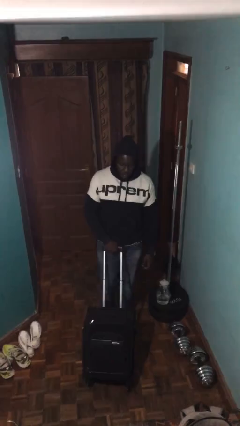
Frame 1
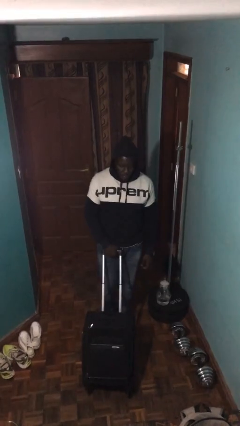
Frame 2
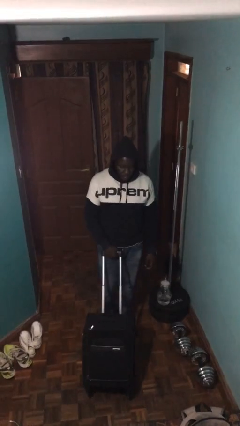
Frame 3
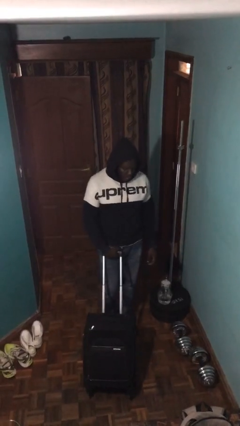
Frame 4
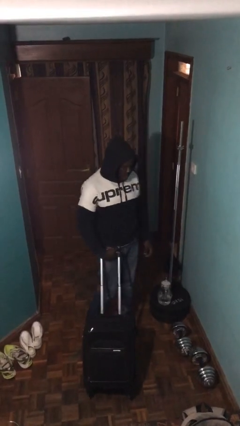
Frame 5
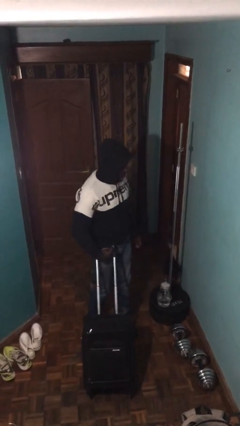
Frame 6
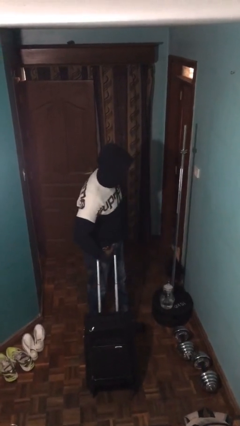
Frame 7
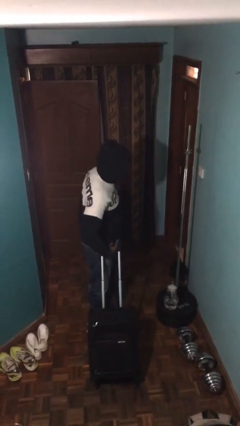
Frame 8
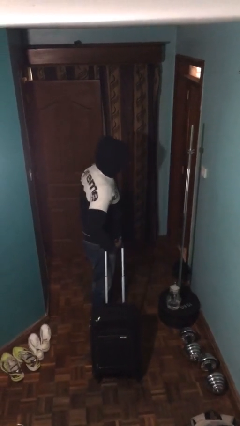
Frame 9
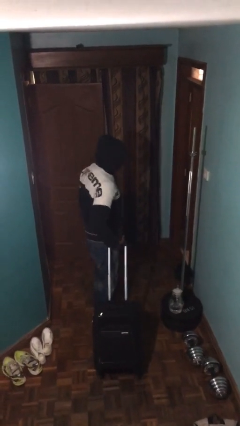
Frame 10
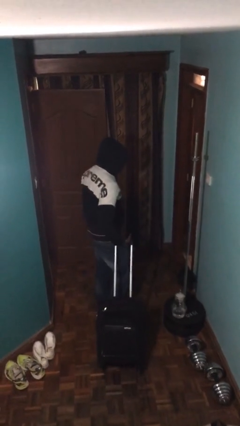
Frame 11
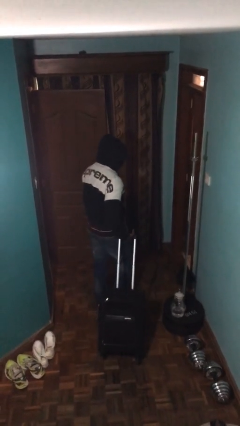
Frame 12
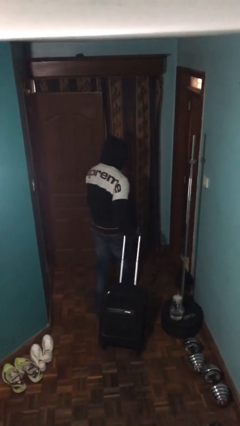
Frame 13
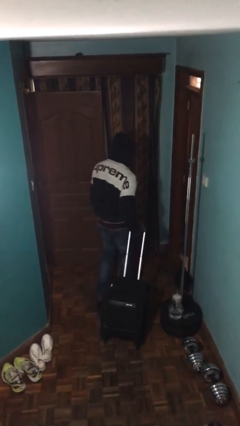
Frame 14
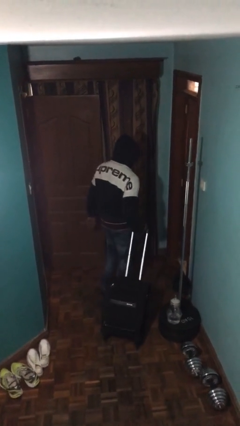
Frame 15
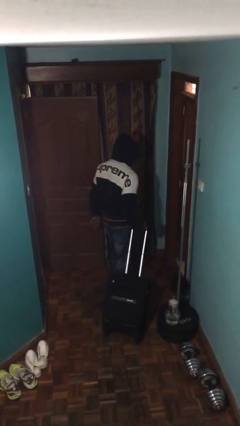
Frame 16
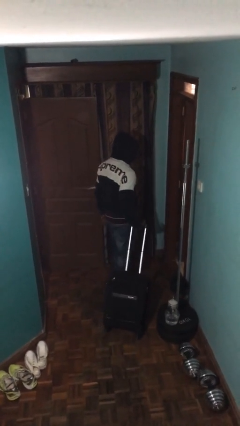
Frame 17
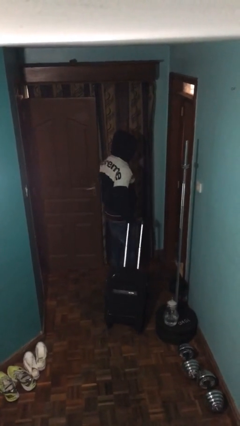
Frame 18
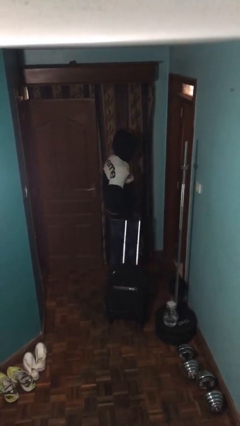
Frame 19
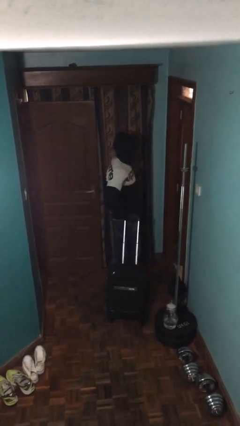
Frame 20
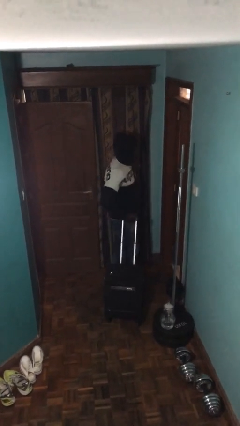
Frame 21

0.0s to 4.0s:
person pulls wheeled cart

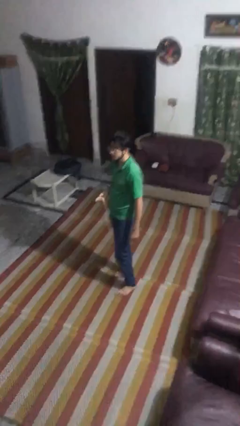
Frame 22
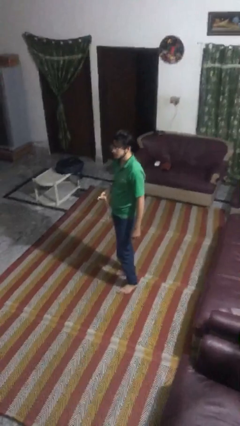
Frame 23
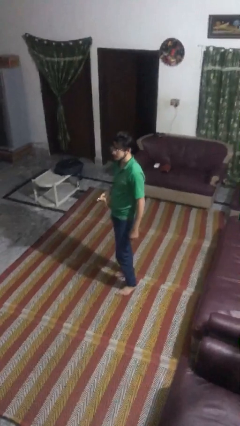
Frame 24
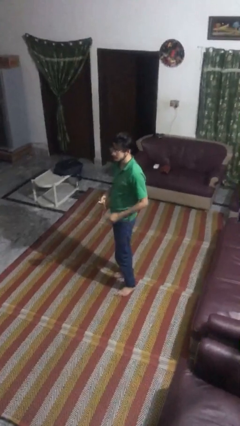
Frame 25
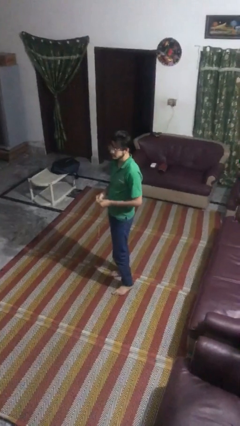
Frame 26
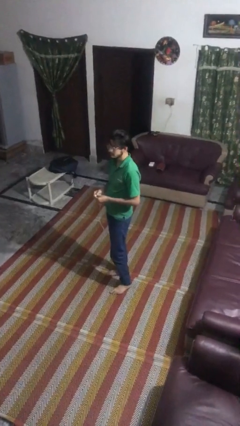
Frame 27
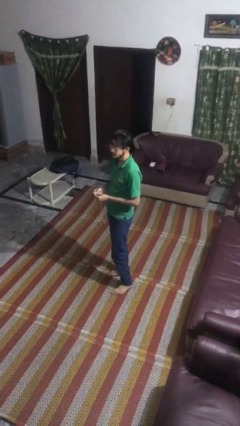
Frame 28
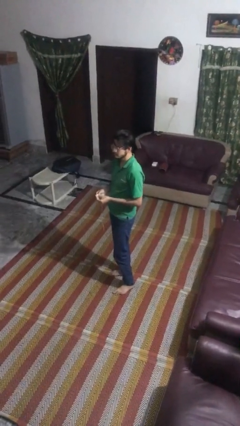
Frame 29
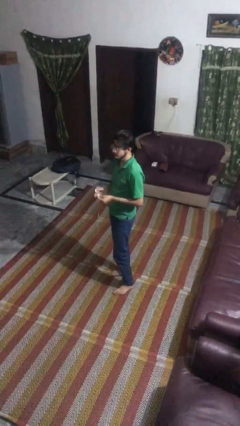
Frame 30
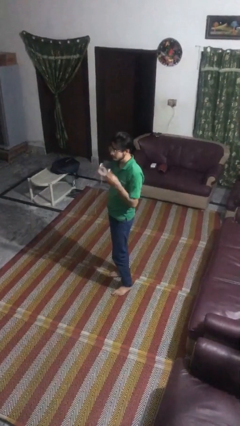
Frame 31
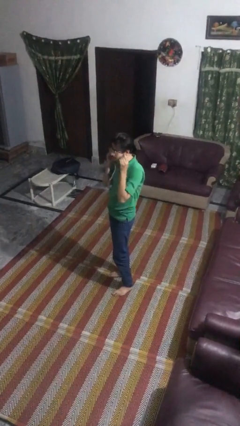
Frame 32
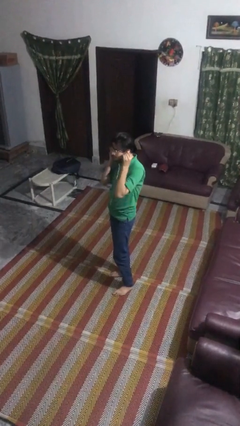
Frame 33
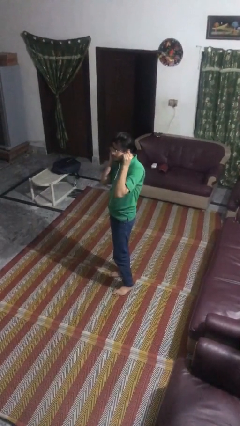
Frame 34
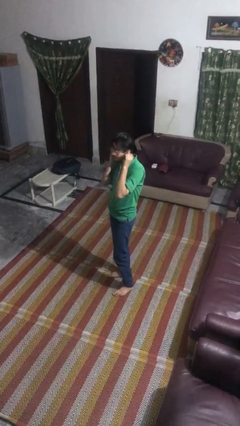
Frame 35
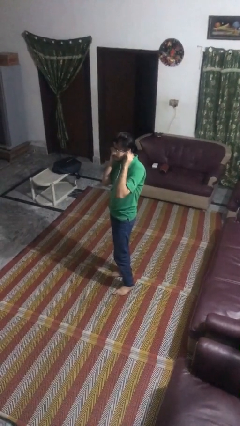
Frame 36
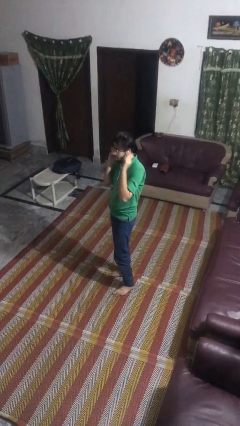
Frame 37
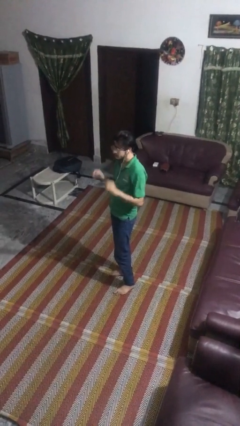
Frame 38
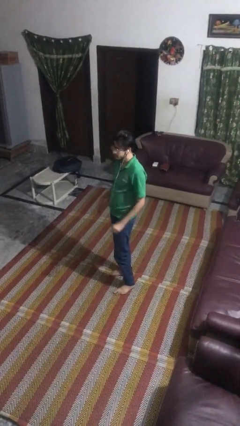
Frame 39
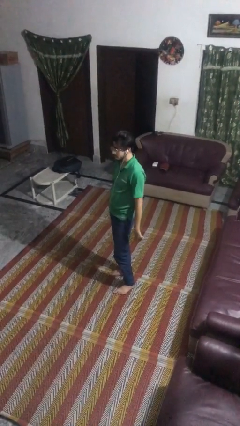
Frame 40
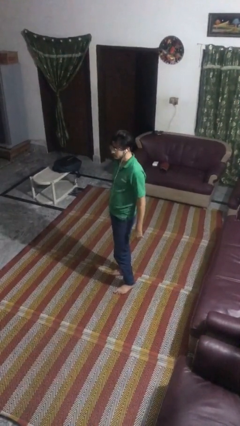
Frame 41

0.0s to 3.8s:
person puts on headphones

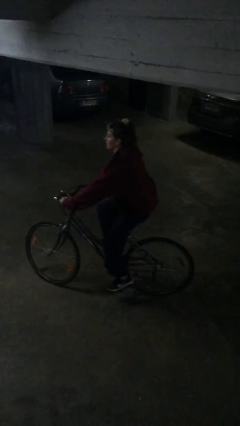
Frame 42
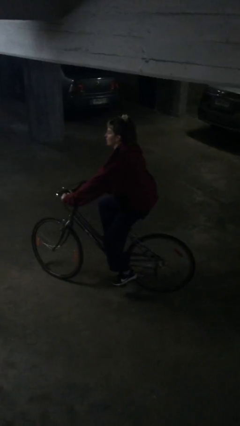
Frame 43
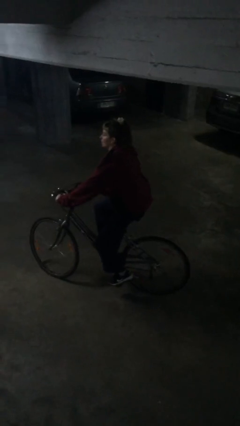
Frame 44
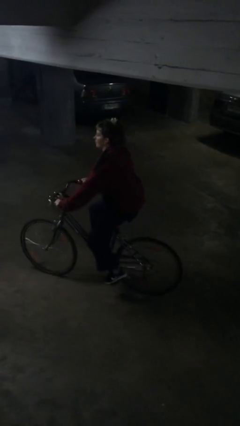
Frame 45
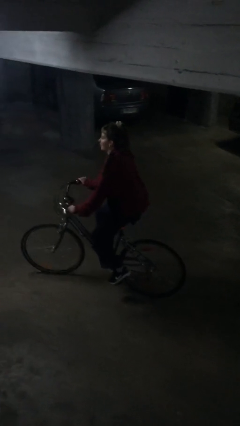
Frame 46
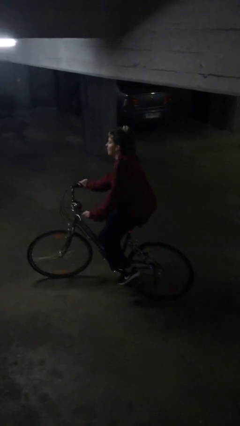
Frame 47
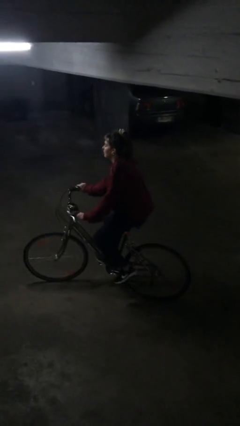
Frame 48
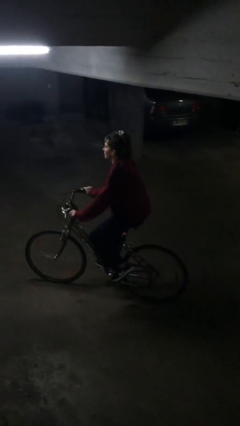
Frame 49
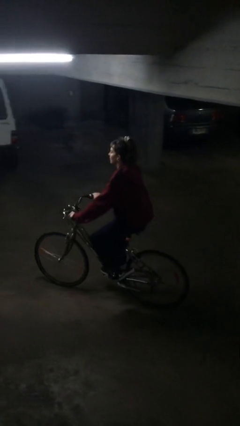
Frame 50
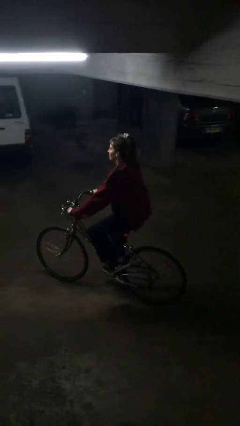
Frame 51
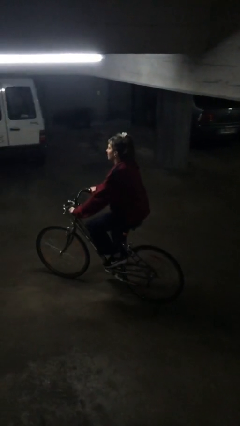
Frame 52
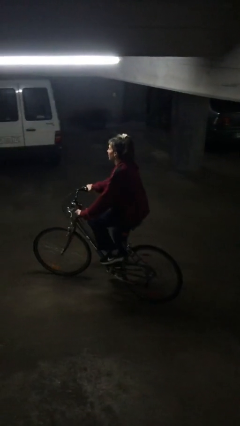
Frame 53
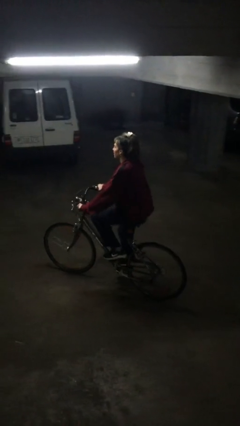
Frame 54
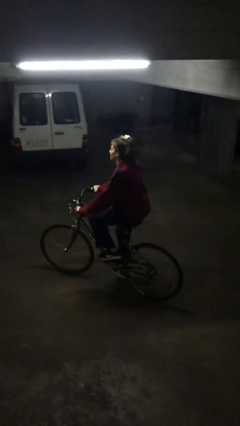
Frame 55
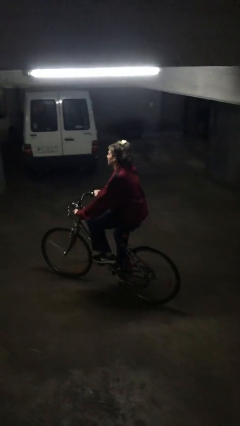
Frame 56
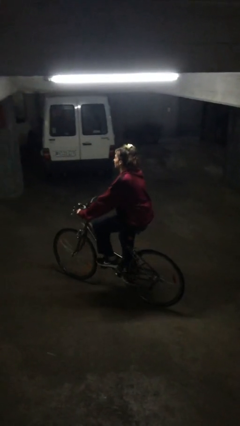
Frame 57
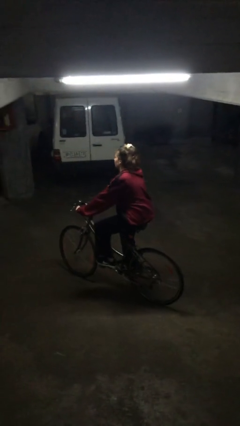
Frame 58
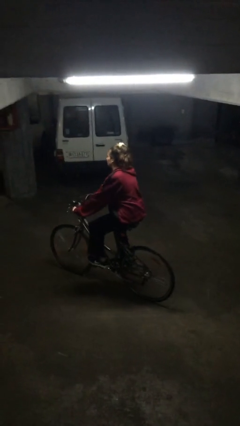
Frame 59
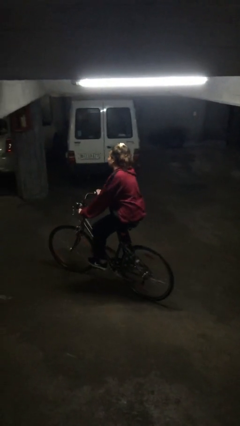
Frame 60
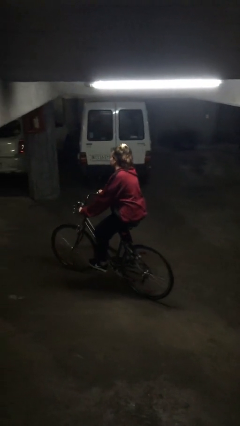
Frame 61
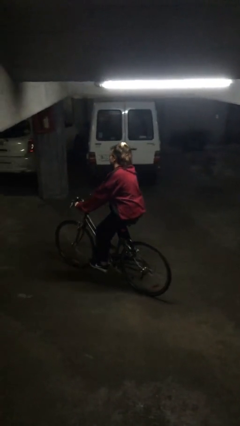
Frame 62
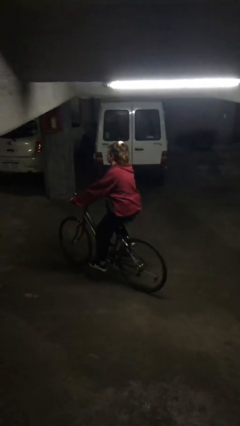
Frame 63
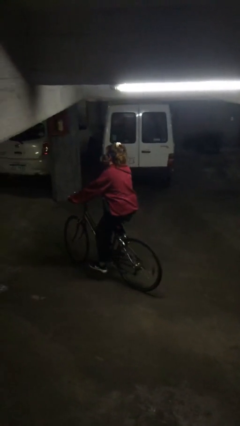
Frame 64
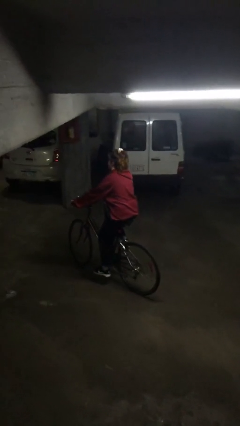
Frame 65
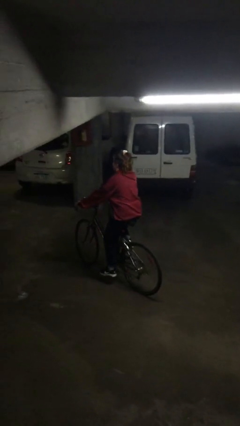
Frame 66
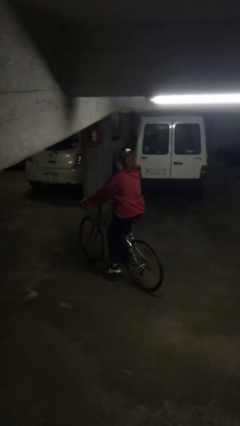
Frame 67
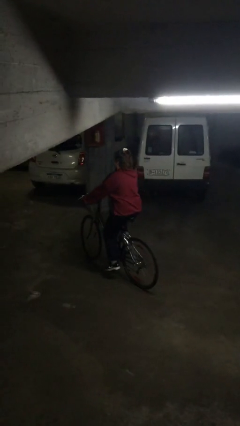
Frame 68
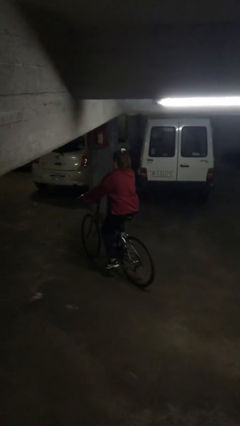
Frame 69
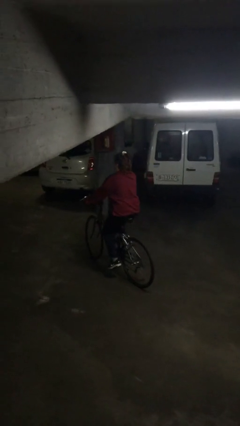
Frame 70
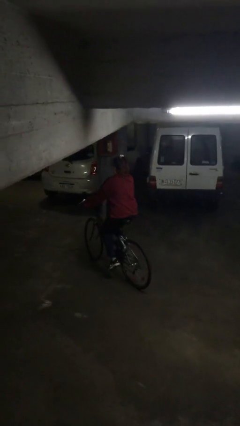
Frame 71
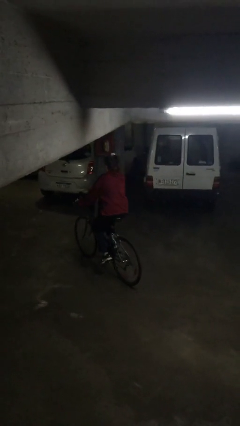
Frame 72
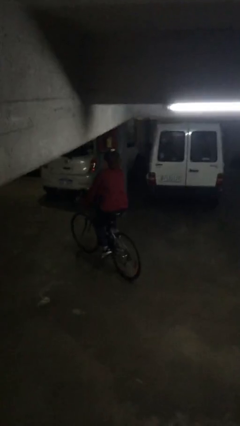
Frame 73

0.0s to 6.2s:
person rides bicycle

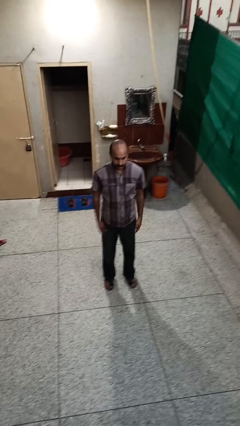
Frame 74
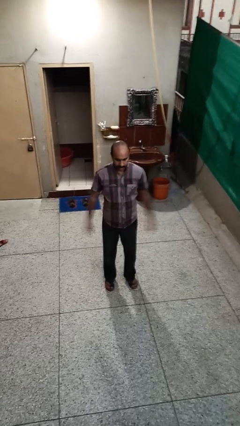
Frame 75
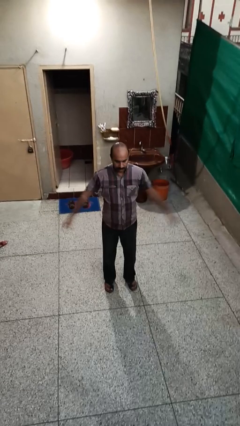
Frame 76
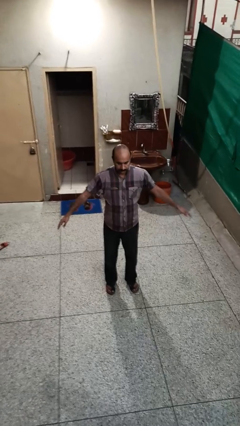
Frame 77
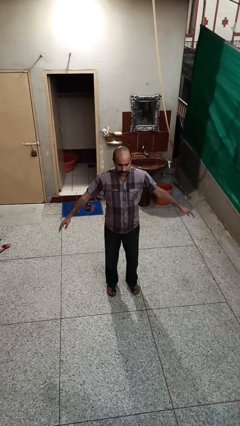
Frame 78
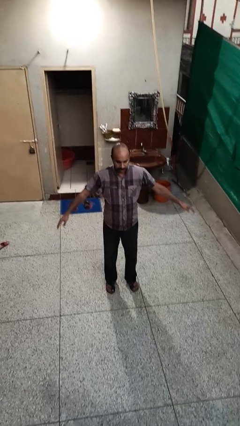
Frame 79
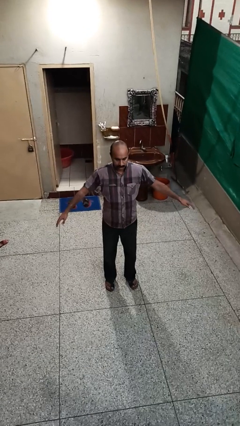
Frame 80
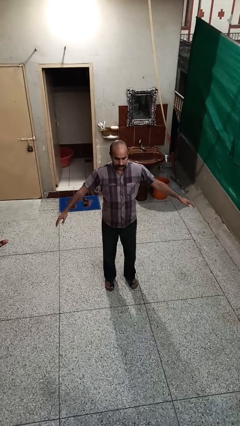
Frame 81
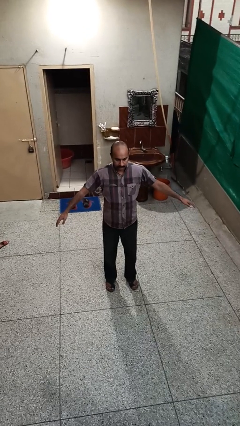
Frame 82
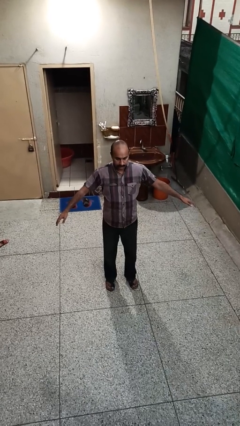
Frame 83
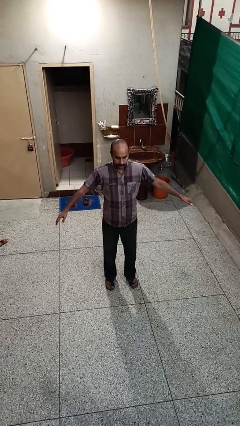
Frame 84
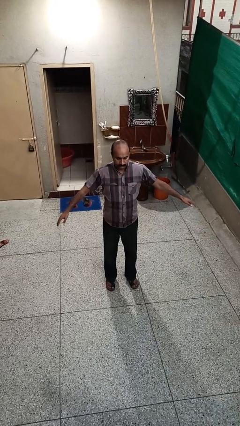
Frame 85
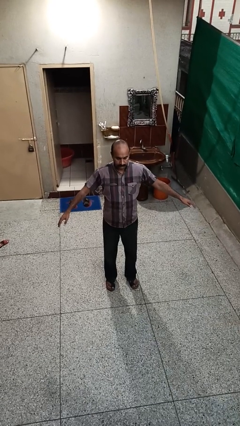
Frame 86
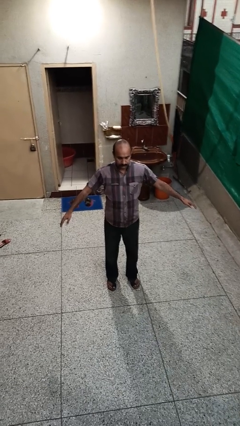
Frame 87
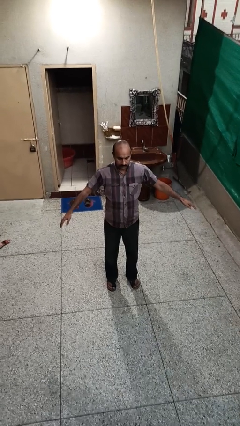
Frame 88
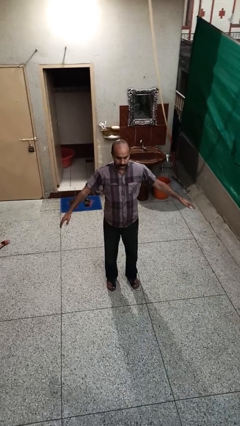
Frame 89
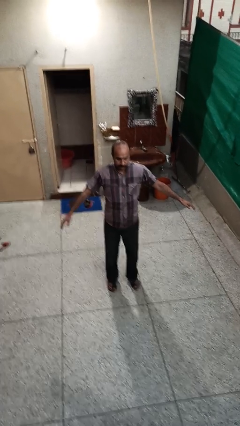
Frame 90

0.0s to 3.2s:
person stretches arms to side

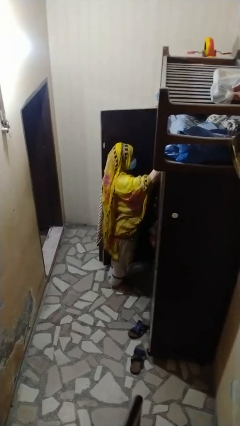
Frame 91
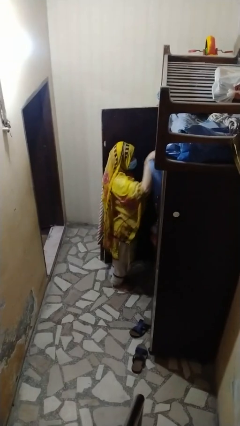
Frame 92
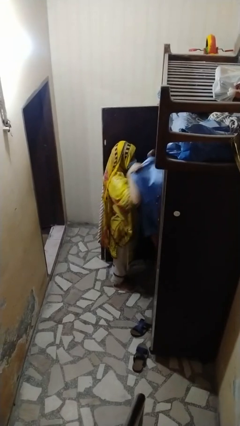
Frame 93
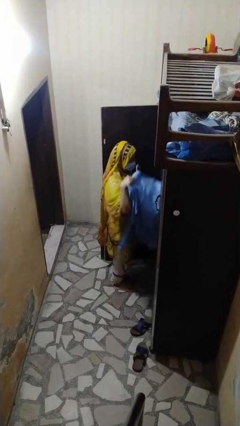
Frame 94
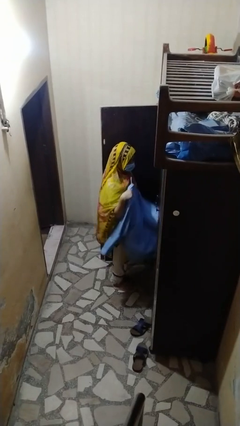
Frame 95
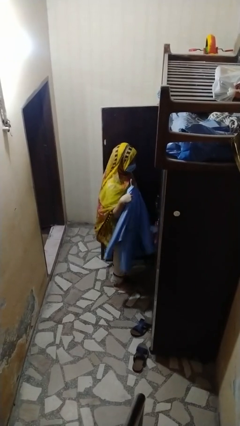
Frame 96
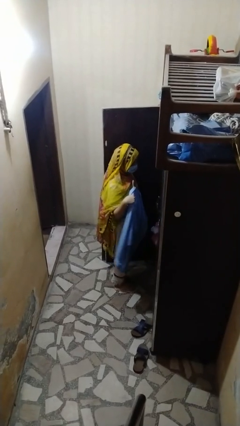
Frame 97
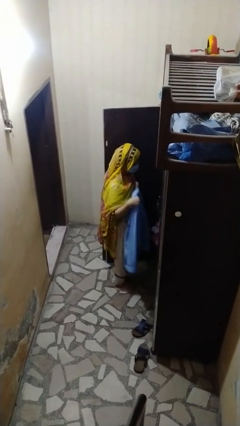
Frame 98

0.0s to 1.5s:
person takes clothes from closet
